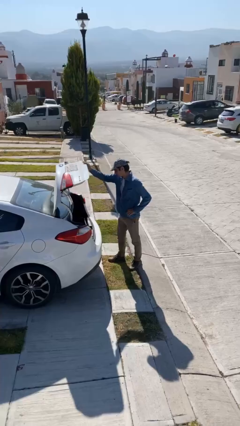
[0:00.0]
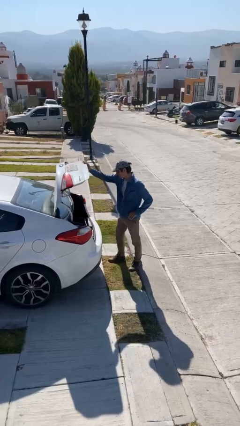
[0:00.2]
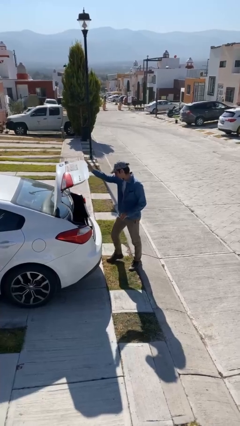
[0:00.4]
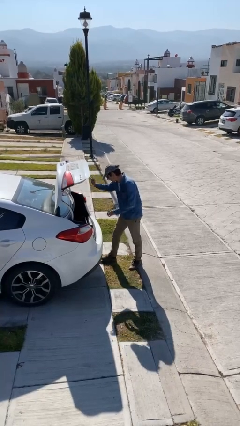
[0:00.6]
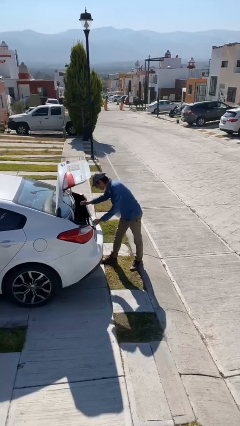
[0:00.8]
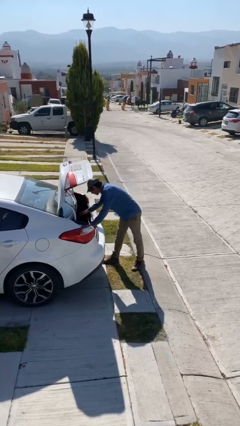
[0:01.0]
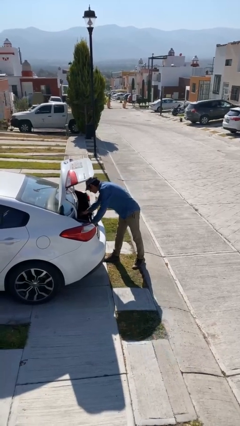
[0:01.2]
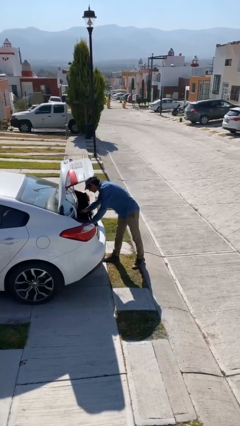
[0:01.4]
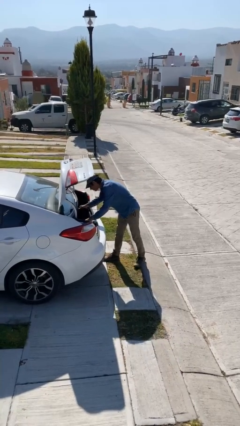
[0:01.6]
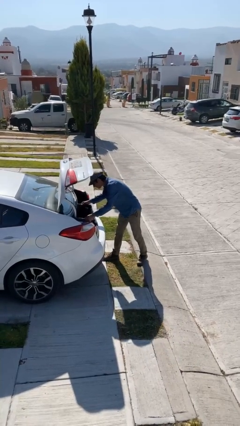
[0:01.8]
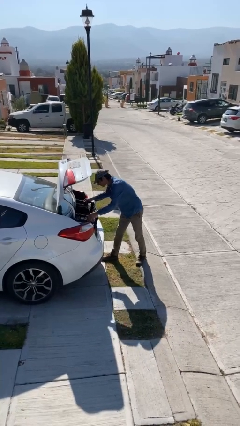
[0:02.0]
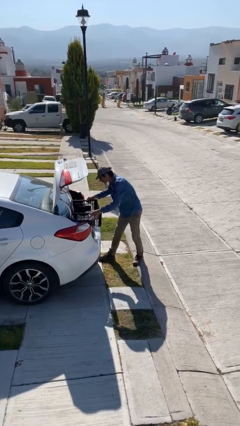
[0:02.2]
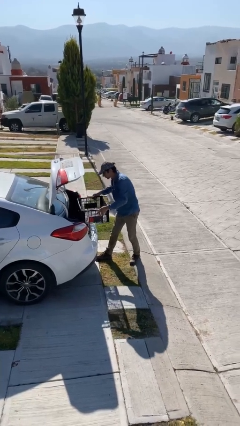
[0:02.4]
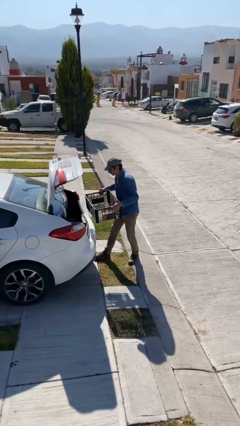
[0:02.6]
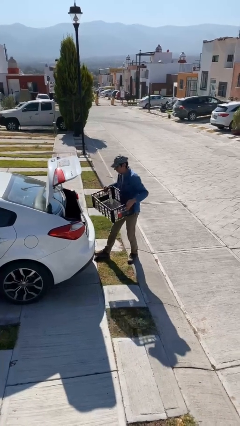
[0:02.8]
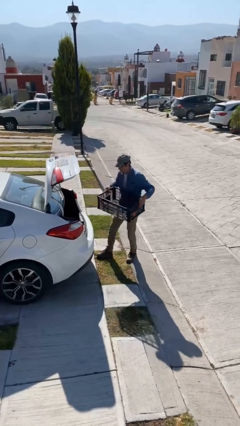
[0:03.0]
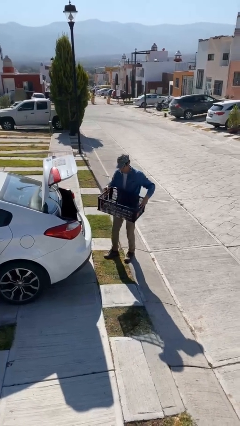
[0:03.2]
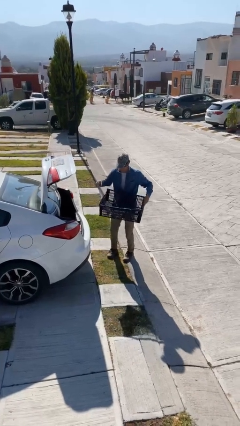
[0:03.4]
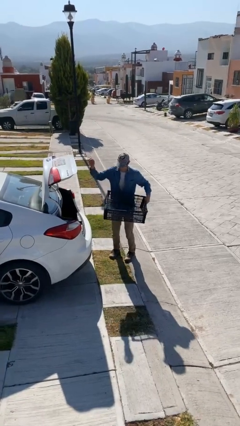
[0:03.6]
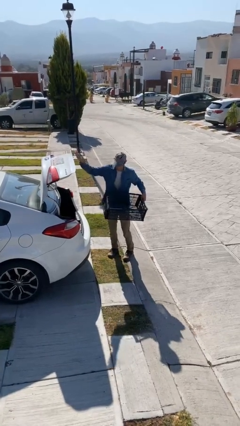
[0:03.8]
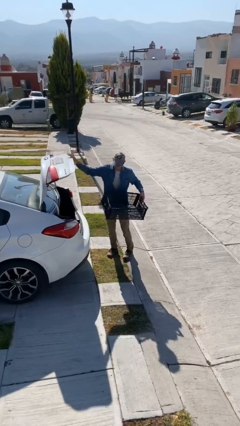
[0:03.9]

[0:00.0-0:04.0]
person unloads car

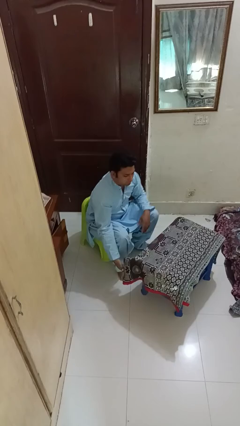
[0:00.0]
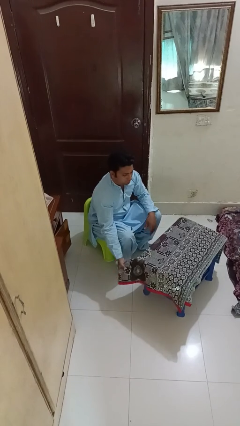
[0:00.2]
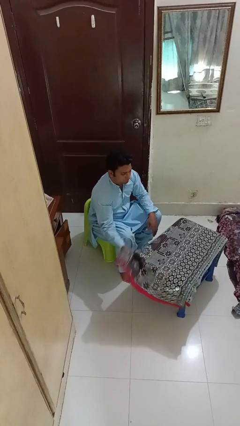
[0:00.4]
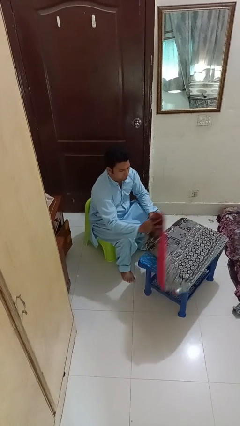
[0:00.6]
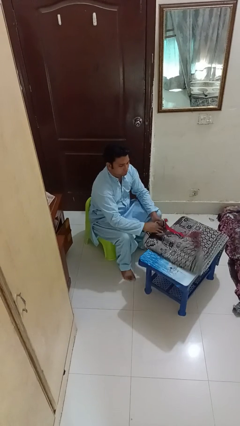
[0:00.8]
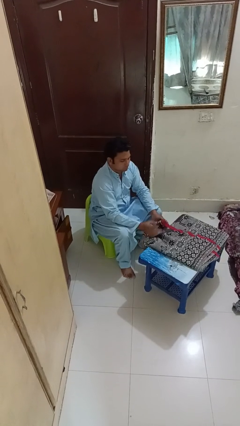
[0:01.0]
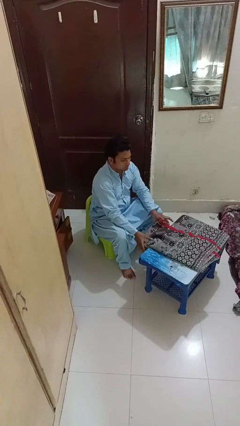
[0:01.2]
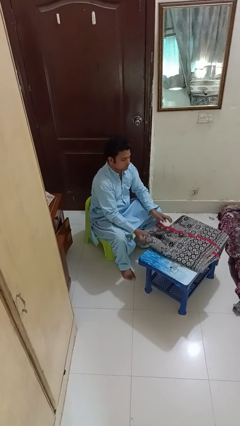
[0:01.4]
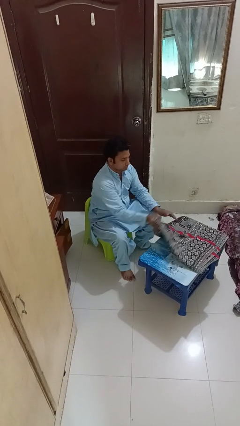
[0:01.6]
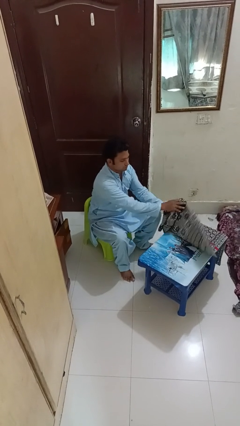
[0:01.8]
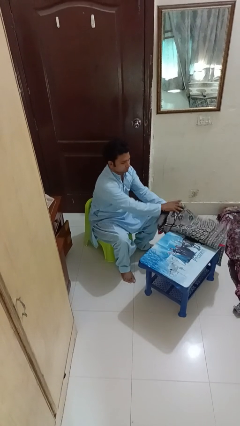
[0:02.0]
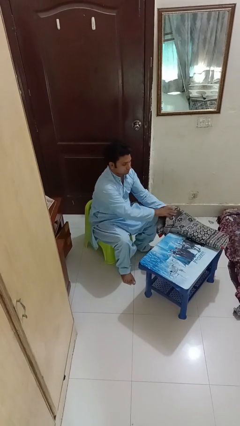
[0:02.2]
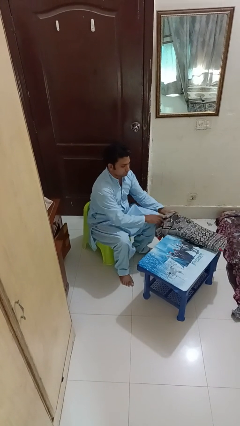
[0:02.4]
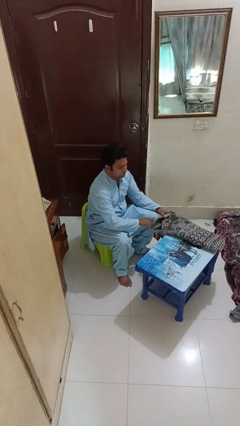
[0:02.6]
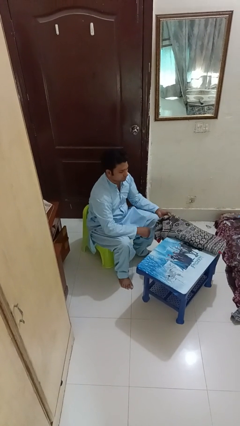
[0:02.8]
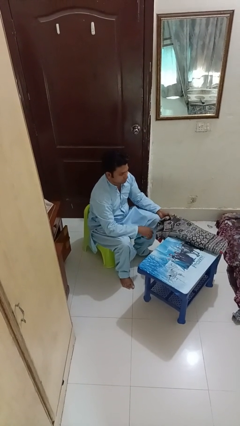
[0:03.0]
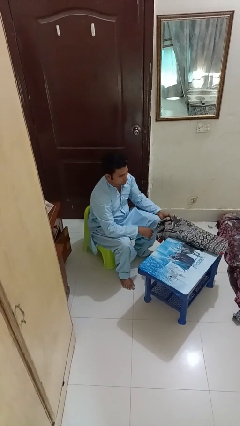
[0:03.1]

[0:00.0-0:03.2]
person folds blanket

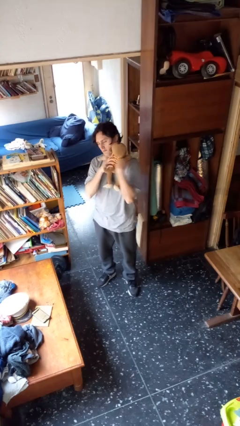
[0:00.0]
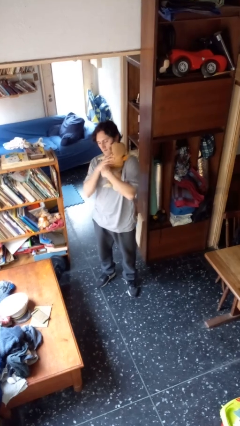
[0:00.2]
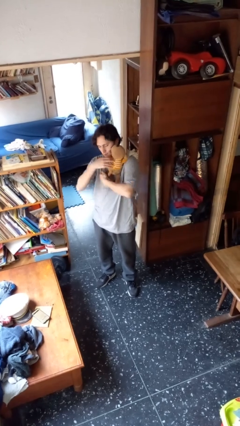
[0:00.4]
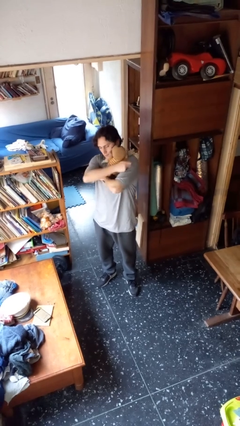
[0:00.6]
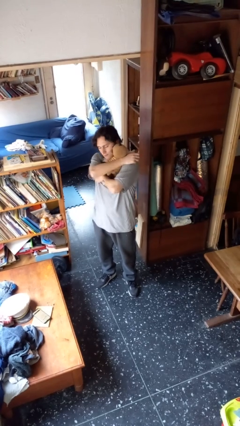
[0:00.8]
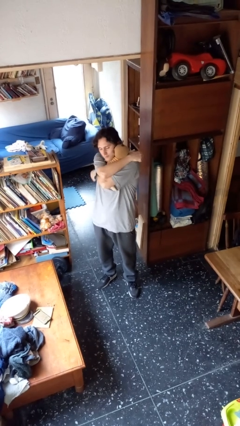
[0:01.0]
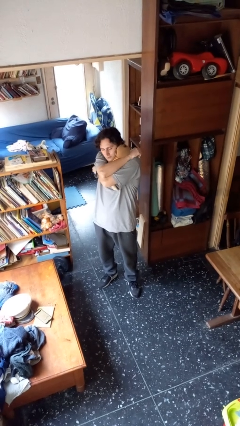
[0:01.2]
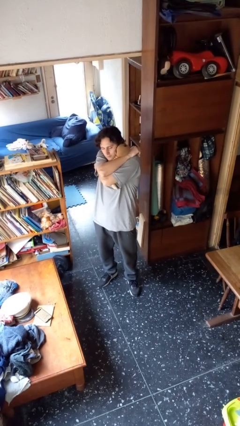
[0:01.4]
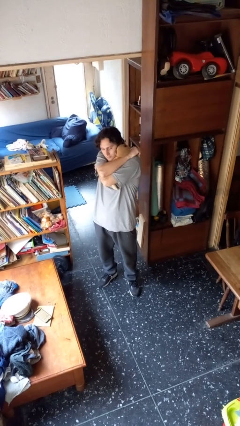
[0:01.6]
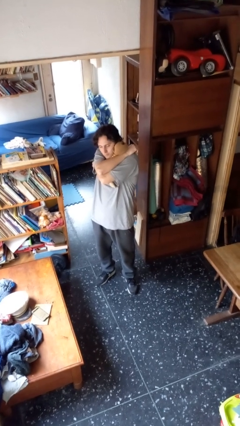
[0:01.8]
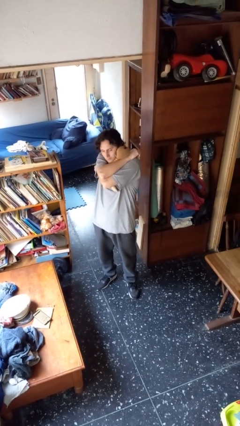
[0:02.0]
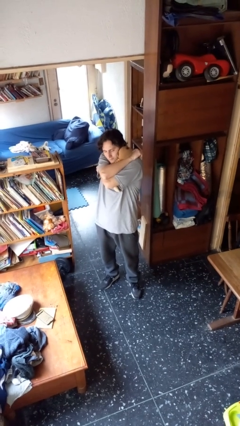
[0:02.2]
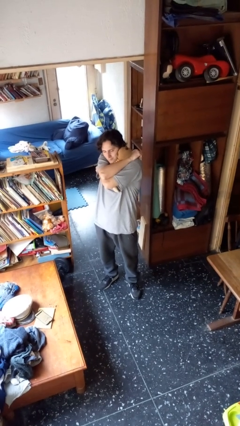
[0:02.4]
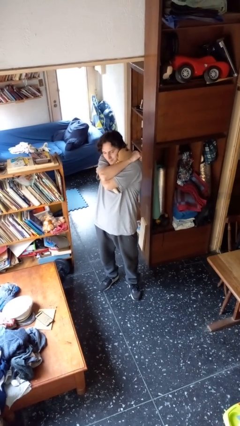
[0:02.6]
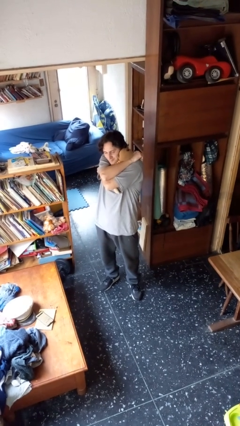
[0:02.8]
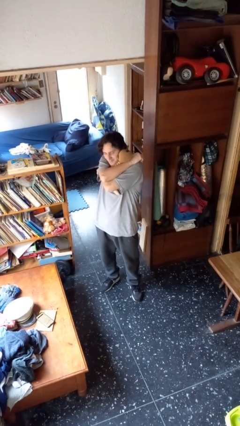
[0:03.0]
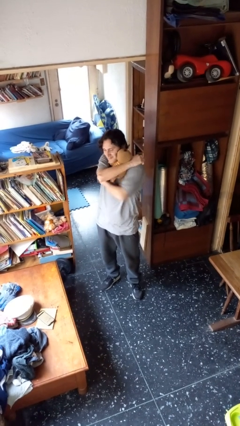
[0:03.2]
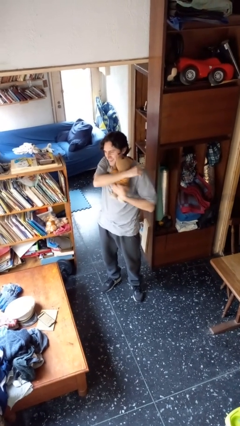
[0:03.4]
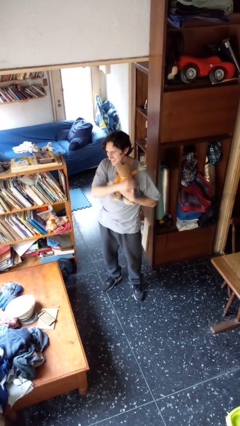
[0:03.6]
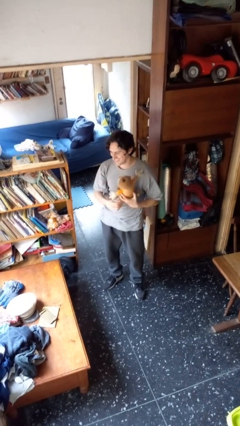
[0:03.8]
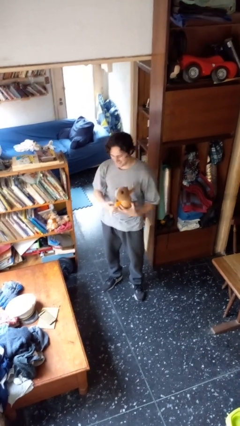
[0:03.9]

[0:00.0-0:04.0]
person hugs stuffed animal

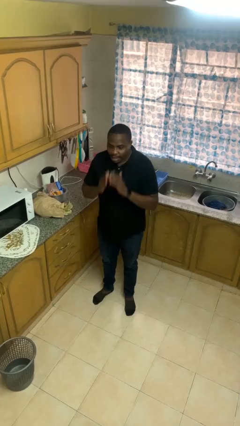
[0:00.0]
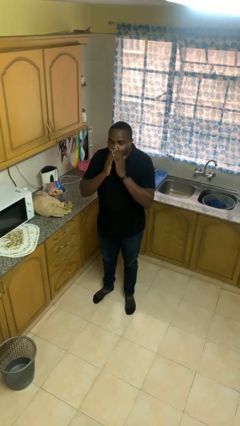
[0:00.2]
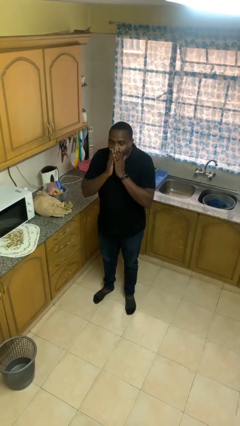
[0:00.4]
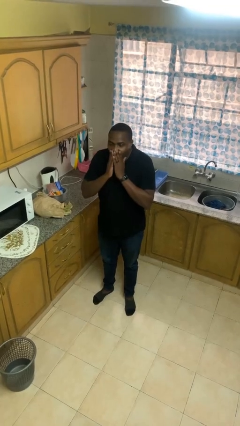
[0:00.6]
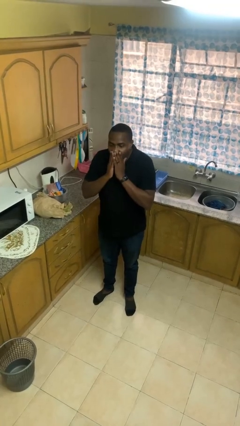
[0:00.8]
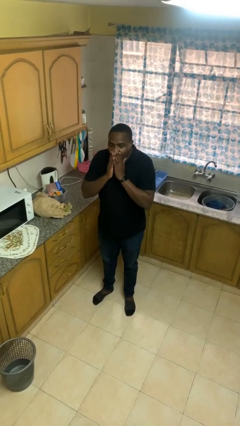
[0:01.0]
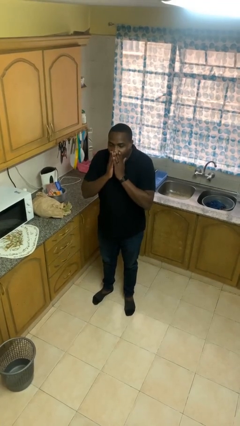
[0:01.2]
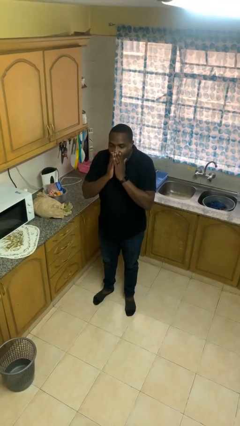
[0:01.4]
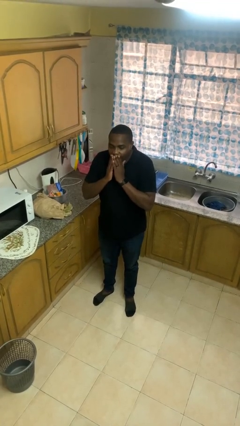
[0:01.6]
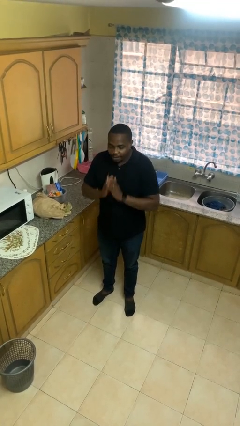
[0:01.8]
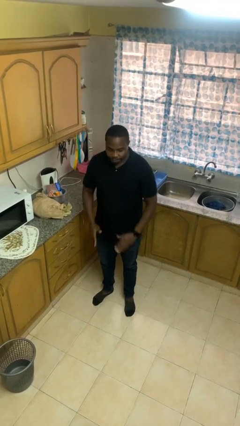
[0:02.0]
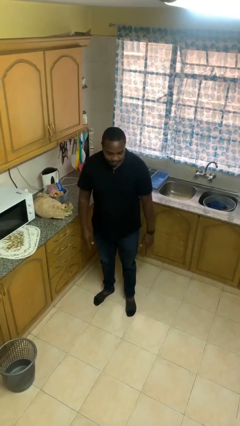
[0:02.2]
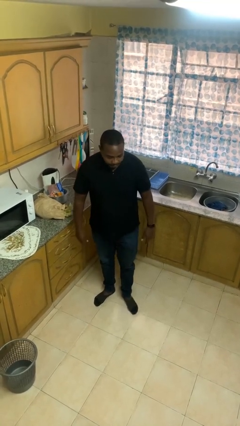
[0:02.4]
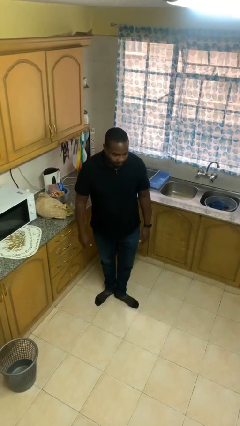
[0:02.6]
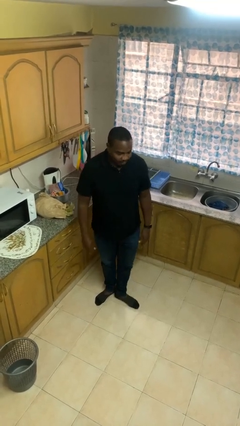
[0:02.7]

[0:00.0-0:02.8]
person yawns

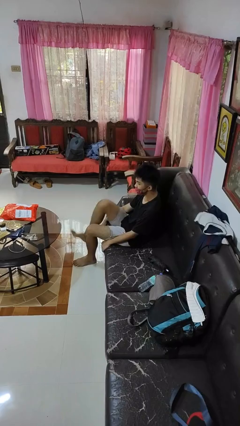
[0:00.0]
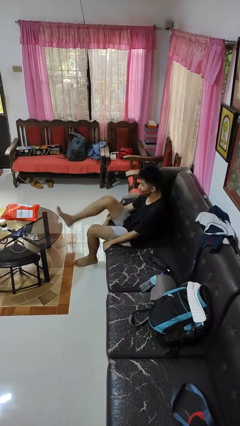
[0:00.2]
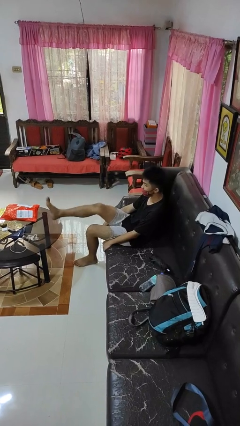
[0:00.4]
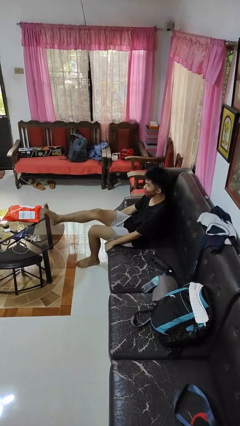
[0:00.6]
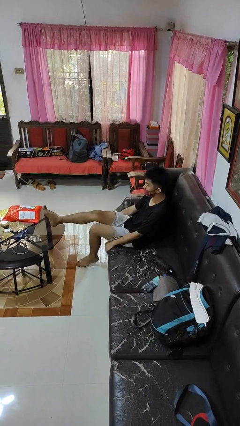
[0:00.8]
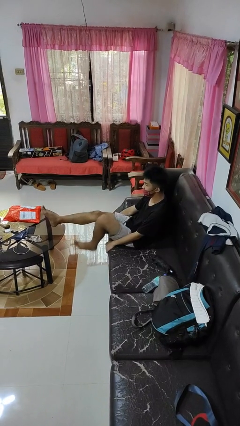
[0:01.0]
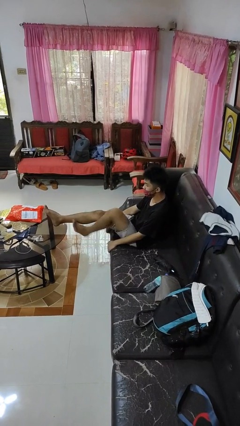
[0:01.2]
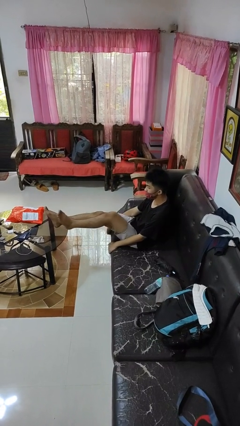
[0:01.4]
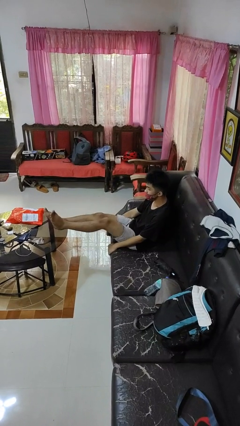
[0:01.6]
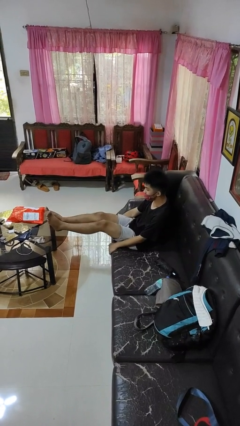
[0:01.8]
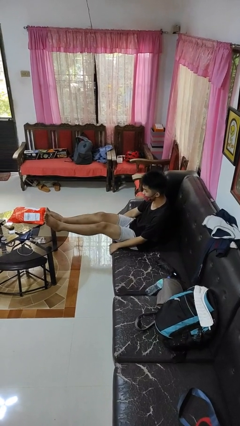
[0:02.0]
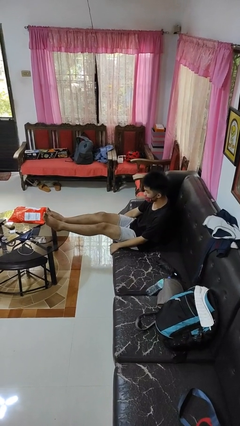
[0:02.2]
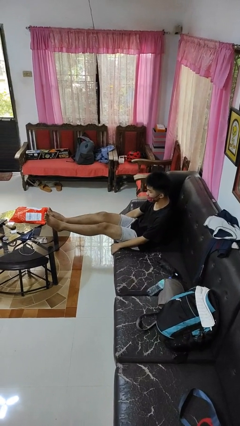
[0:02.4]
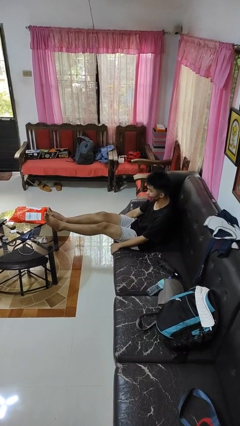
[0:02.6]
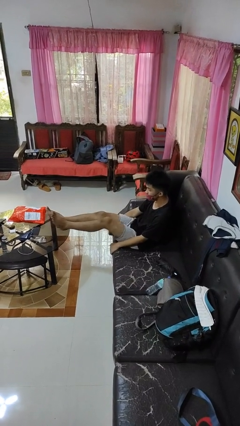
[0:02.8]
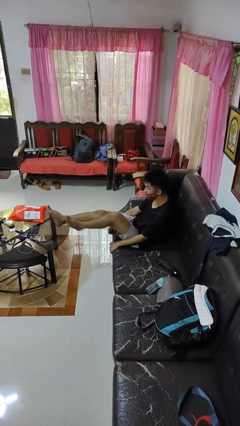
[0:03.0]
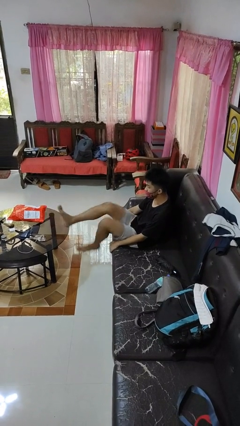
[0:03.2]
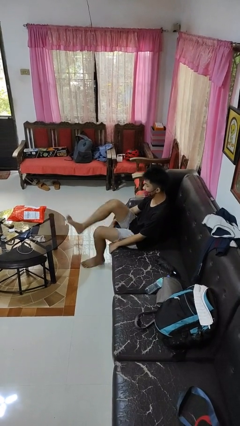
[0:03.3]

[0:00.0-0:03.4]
person puts feet up

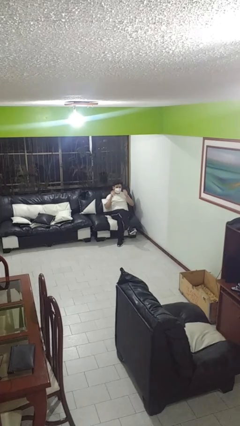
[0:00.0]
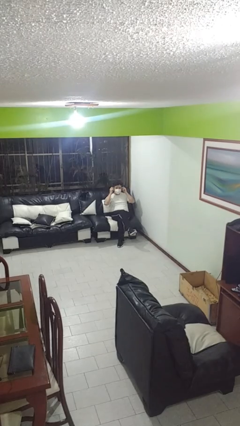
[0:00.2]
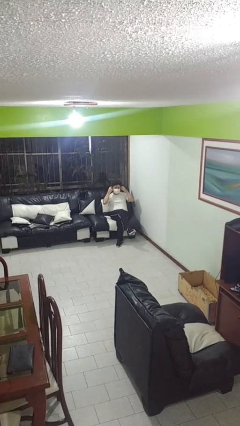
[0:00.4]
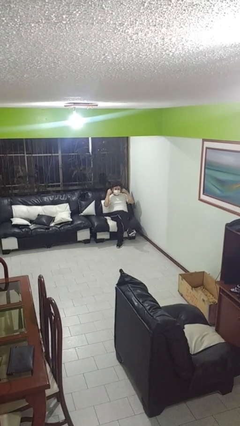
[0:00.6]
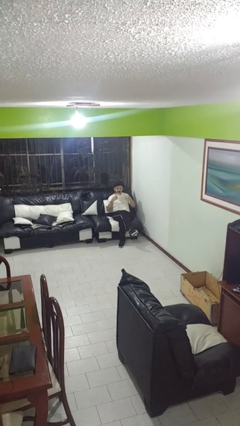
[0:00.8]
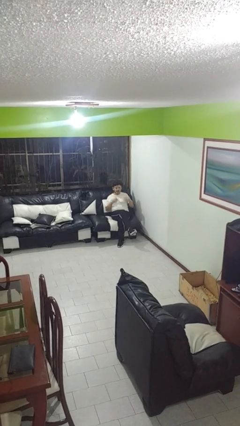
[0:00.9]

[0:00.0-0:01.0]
person takes off facemask
